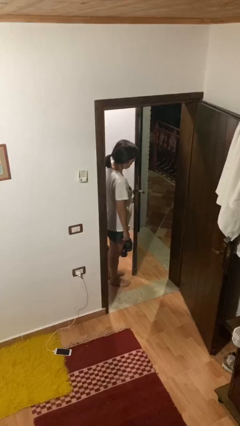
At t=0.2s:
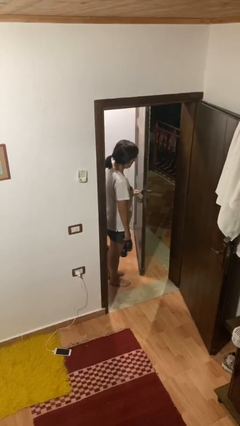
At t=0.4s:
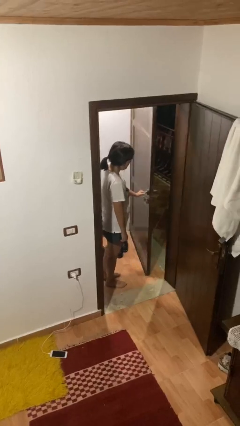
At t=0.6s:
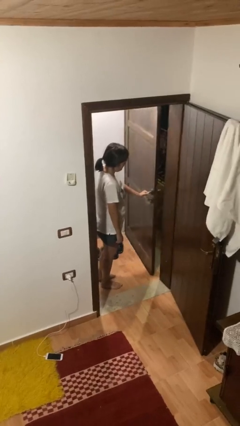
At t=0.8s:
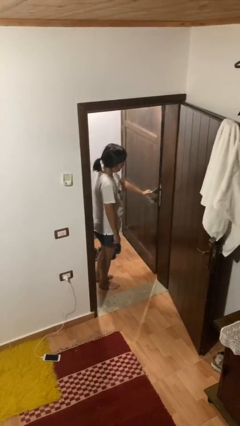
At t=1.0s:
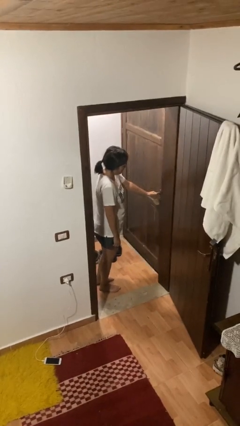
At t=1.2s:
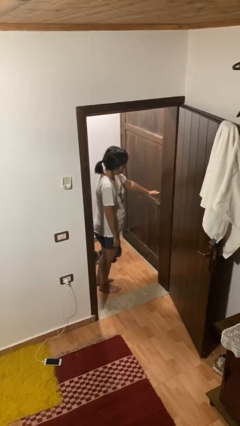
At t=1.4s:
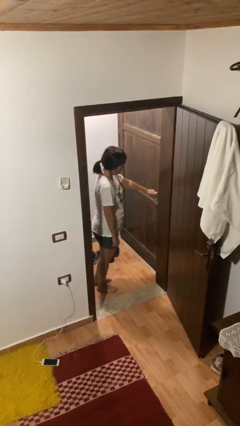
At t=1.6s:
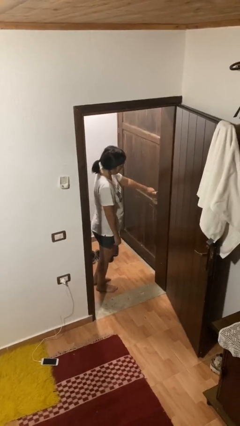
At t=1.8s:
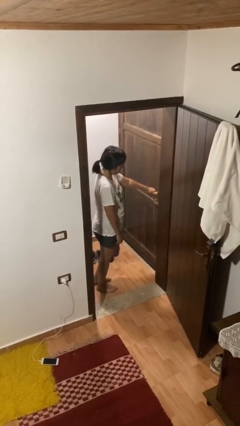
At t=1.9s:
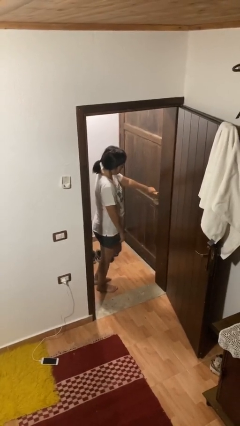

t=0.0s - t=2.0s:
person closes facility door

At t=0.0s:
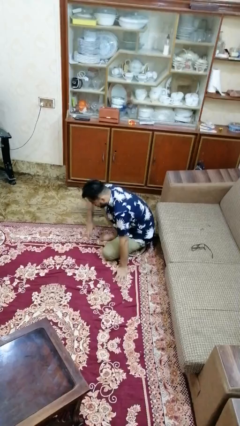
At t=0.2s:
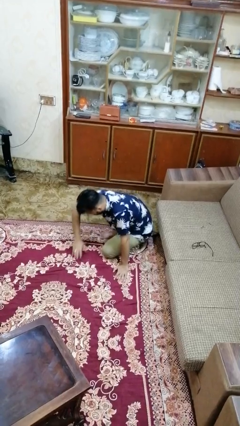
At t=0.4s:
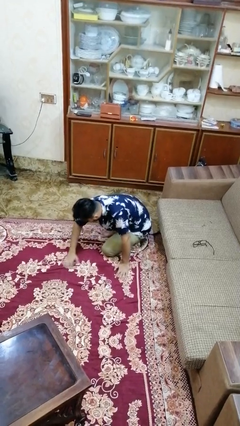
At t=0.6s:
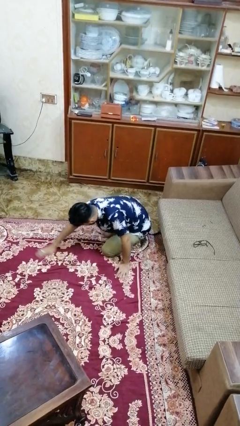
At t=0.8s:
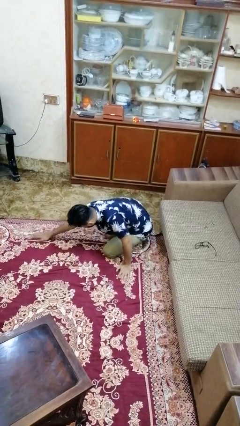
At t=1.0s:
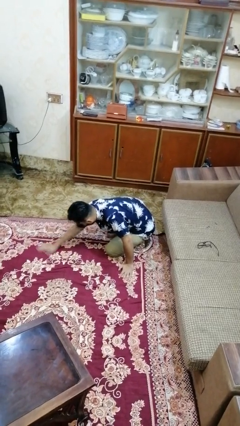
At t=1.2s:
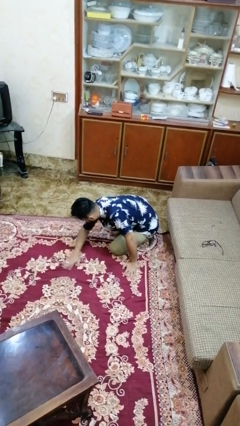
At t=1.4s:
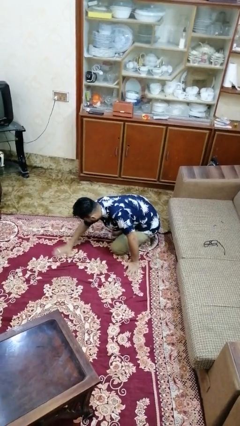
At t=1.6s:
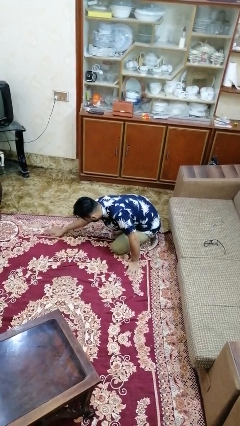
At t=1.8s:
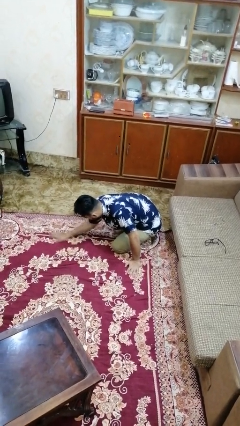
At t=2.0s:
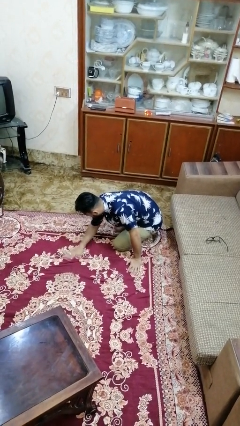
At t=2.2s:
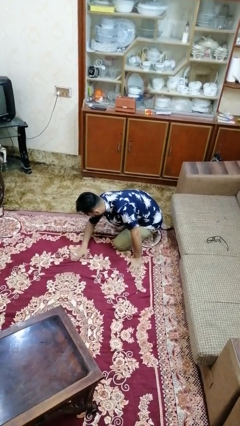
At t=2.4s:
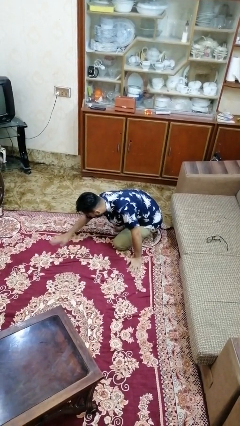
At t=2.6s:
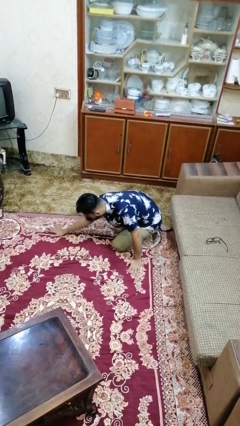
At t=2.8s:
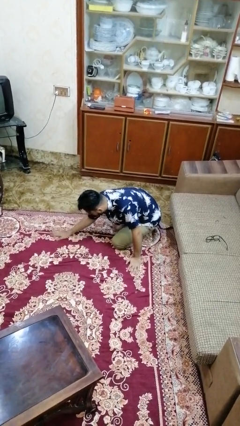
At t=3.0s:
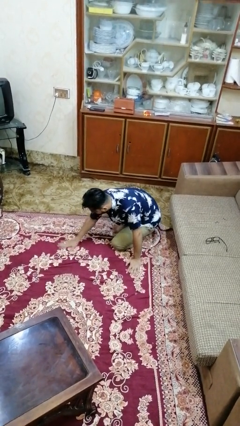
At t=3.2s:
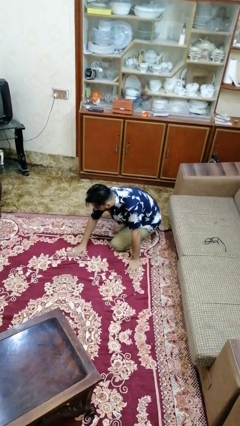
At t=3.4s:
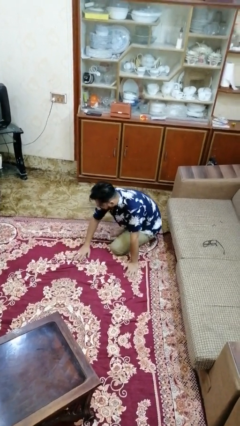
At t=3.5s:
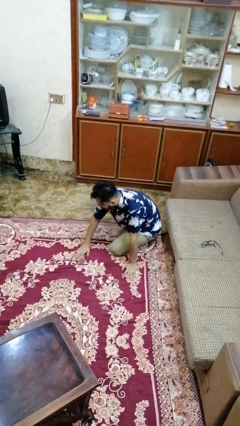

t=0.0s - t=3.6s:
person sweeps floor

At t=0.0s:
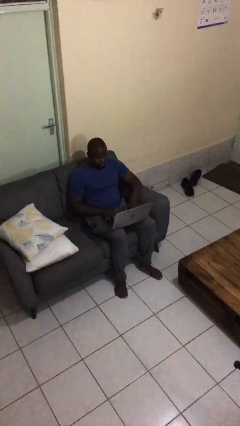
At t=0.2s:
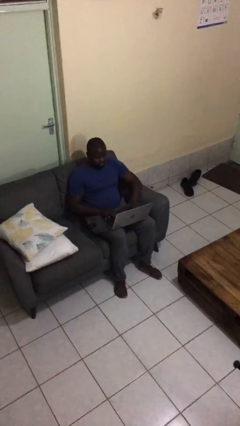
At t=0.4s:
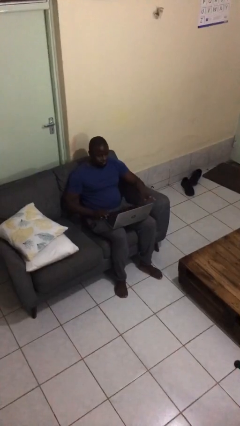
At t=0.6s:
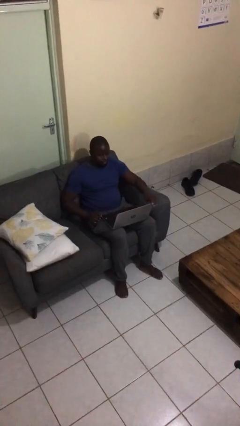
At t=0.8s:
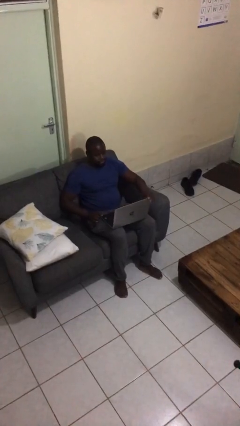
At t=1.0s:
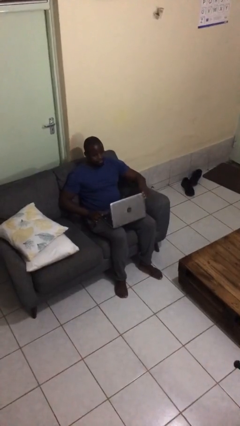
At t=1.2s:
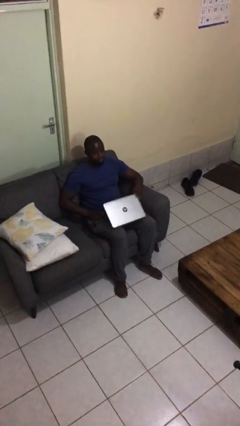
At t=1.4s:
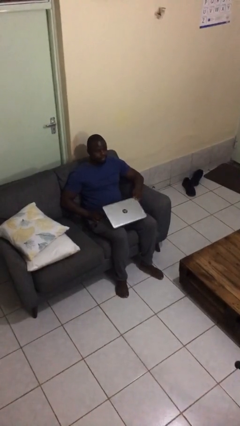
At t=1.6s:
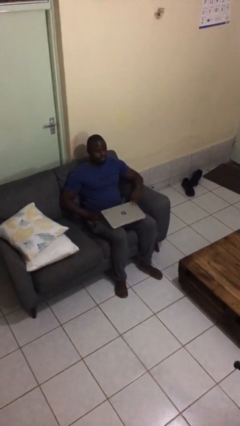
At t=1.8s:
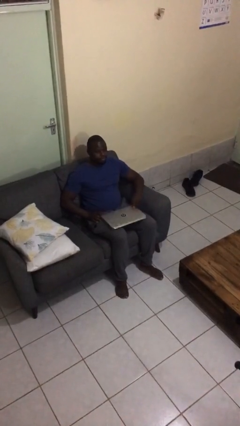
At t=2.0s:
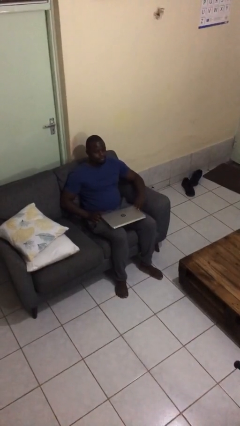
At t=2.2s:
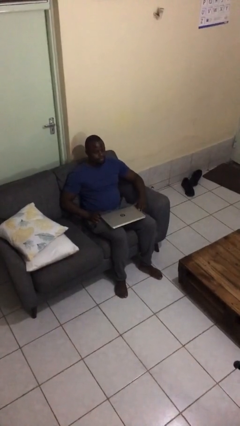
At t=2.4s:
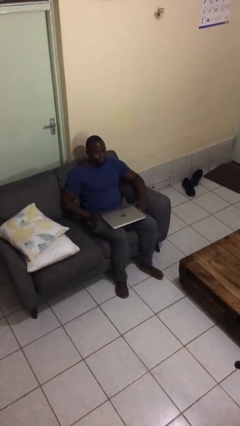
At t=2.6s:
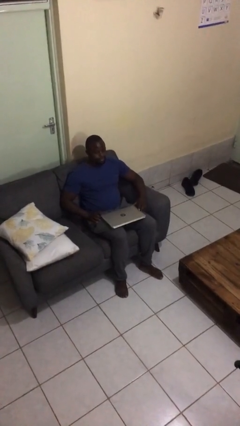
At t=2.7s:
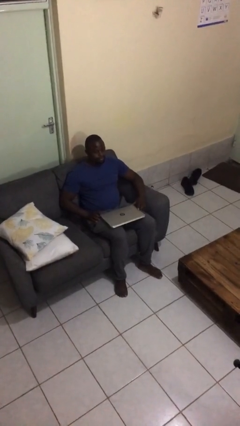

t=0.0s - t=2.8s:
person closes laptop

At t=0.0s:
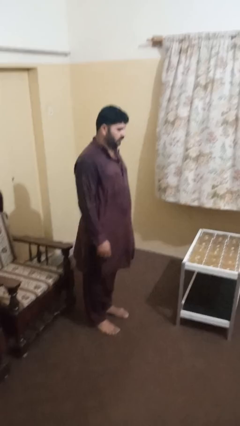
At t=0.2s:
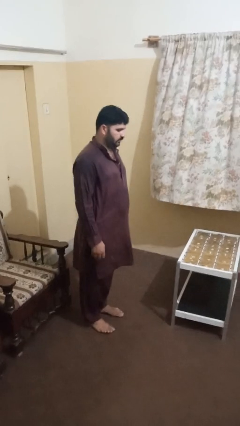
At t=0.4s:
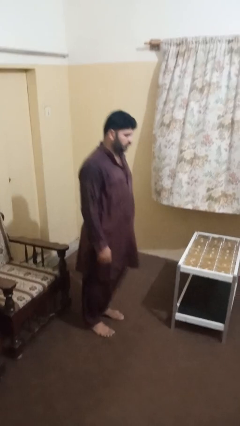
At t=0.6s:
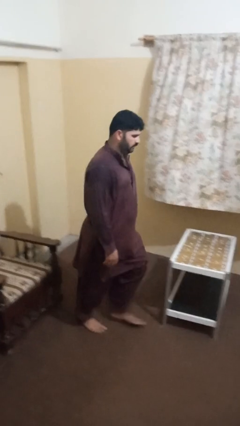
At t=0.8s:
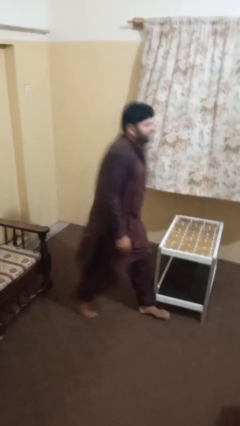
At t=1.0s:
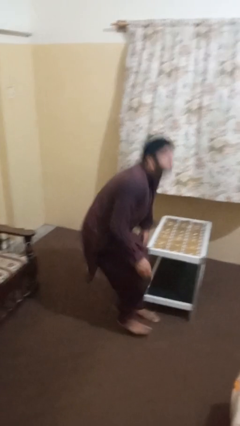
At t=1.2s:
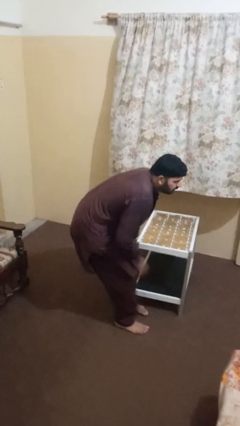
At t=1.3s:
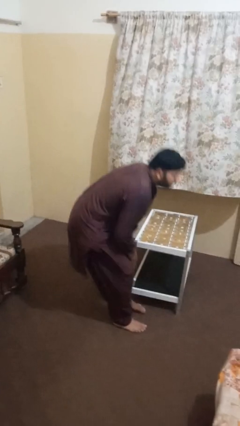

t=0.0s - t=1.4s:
person bumps into table

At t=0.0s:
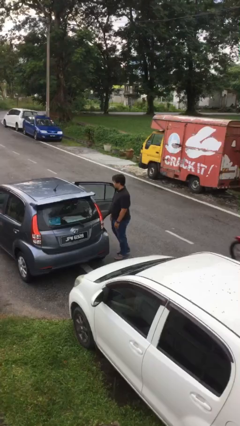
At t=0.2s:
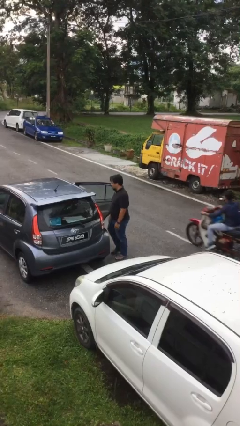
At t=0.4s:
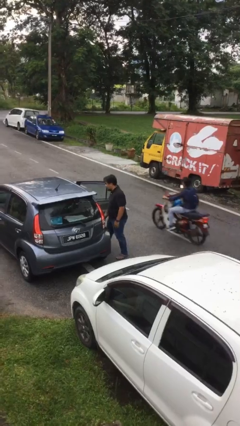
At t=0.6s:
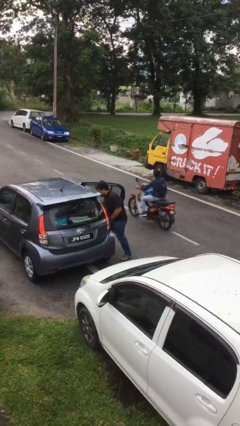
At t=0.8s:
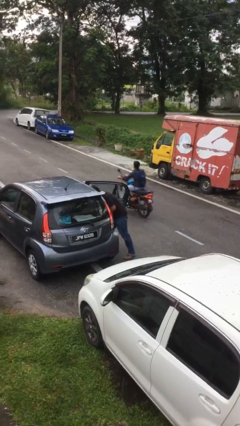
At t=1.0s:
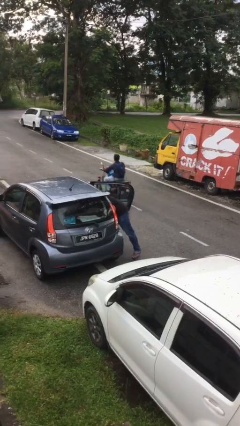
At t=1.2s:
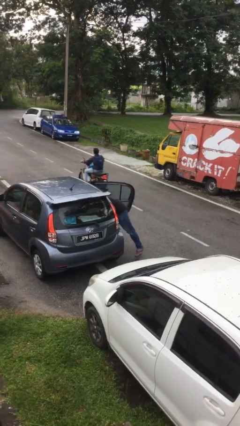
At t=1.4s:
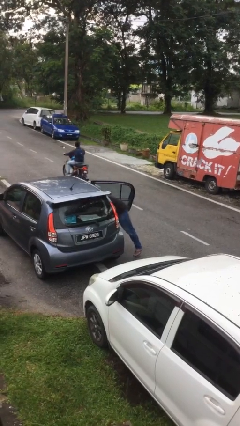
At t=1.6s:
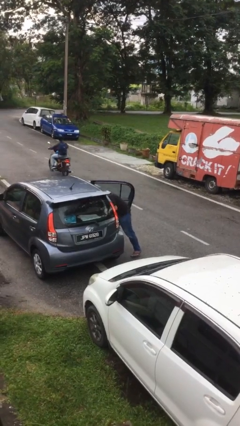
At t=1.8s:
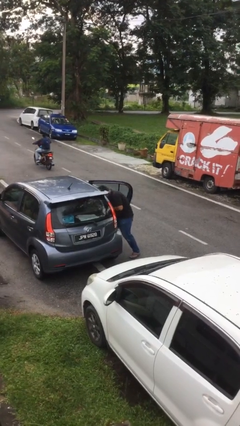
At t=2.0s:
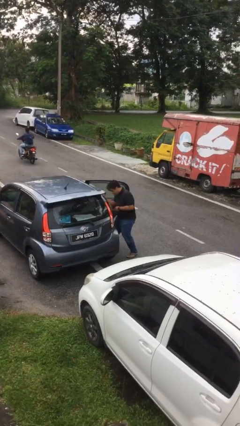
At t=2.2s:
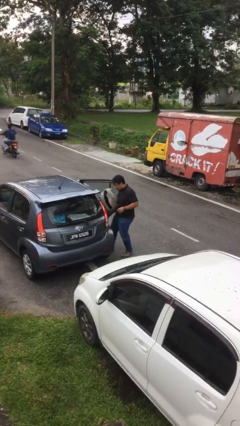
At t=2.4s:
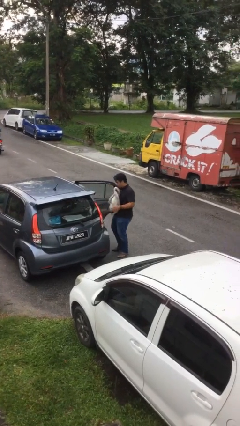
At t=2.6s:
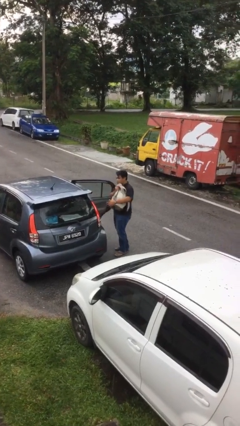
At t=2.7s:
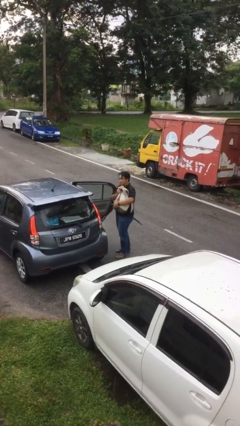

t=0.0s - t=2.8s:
person unloads car

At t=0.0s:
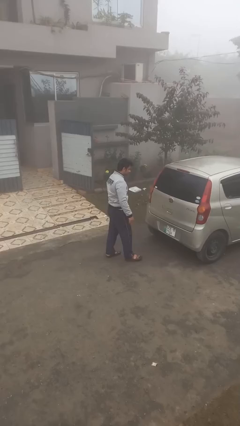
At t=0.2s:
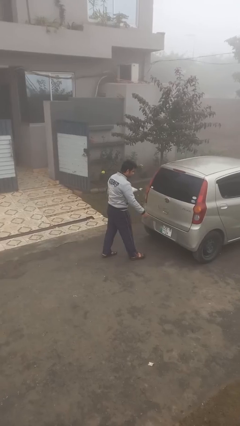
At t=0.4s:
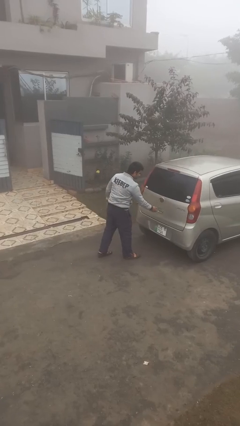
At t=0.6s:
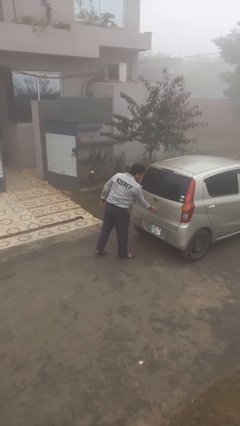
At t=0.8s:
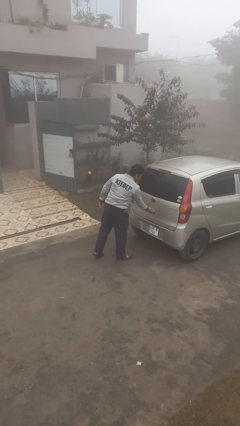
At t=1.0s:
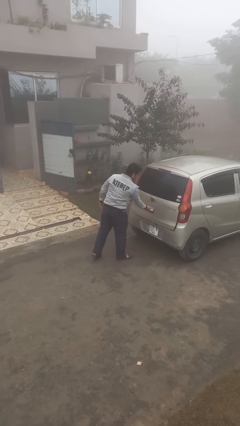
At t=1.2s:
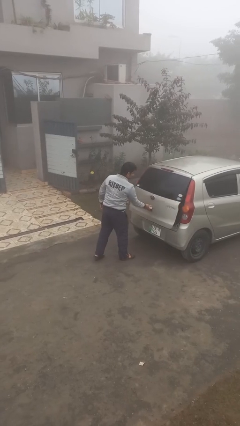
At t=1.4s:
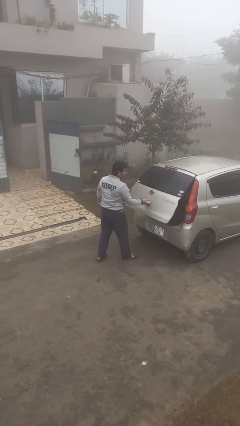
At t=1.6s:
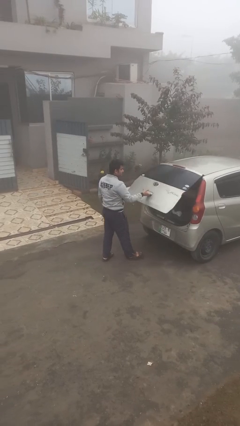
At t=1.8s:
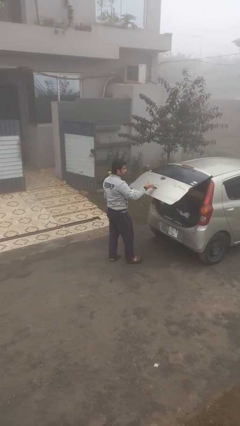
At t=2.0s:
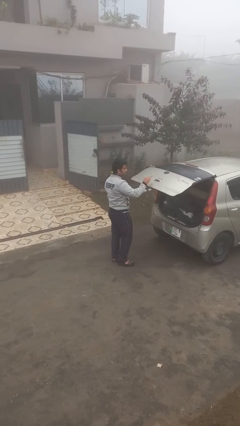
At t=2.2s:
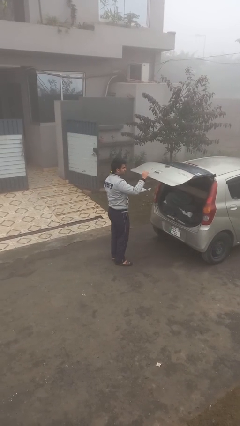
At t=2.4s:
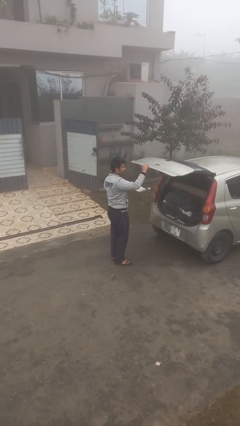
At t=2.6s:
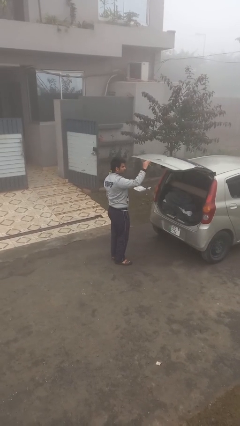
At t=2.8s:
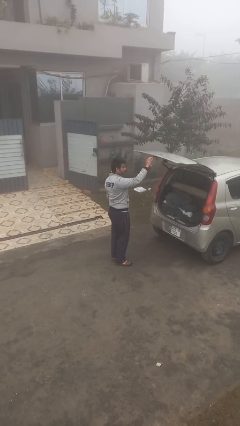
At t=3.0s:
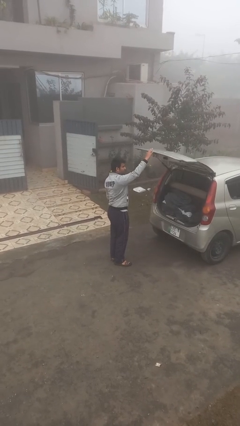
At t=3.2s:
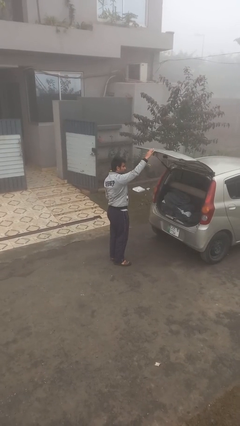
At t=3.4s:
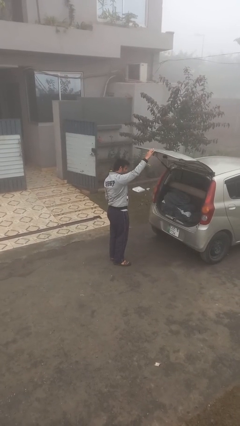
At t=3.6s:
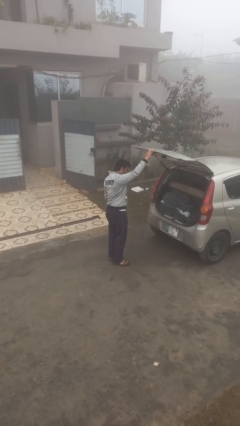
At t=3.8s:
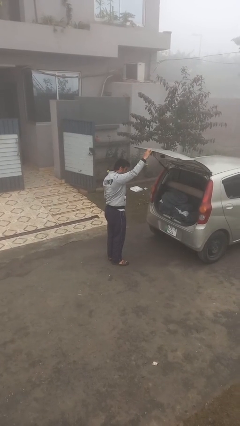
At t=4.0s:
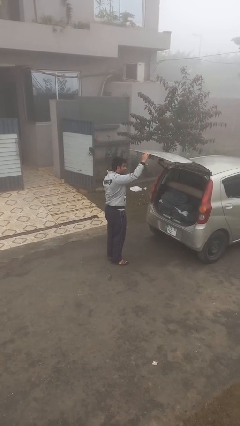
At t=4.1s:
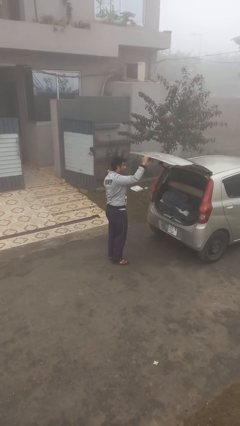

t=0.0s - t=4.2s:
person opens car trunk

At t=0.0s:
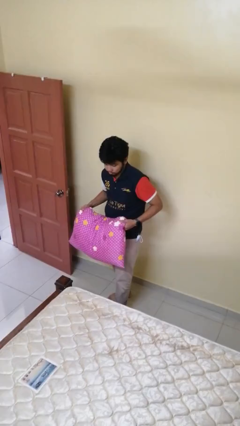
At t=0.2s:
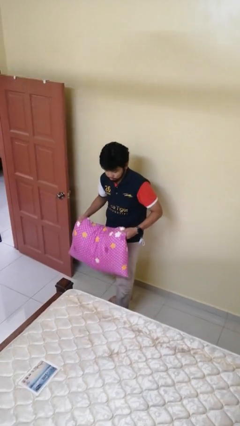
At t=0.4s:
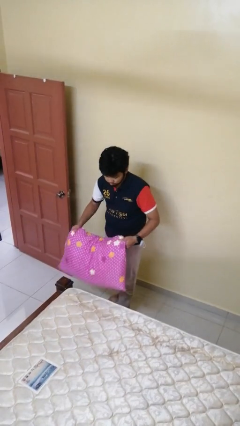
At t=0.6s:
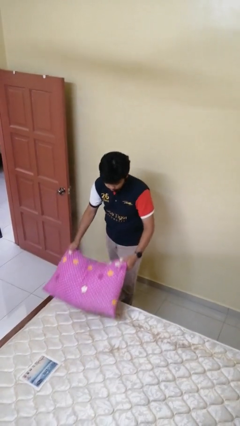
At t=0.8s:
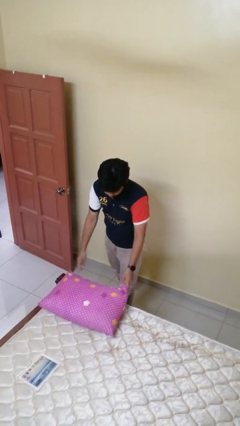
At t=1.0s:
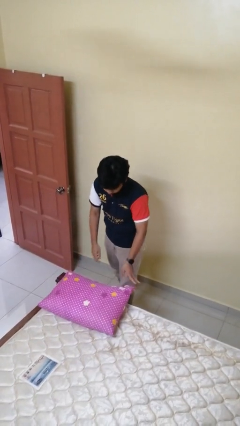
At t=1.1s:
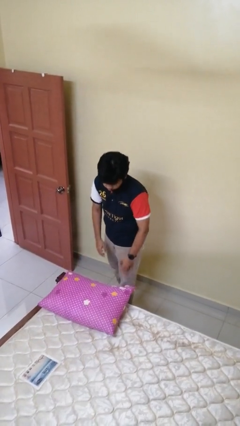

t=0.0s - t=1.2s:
person puts down object on bed
